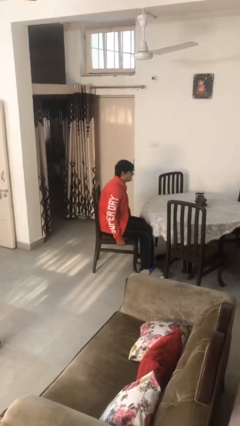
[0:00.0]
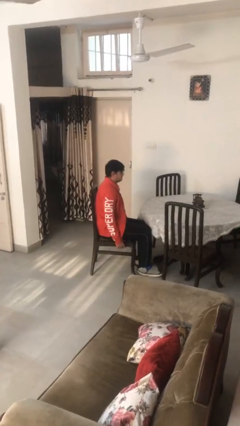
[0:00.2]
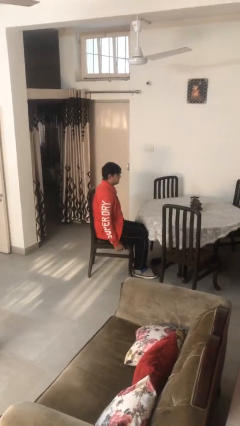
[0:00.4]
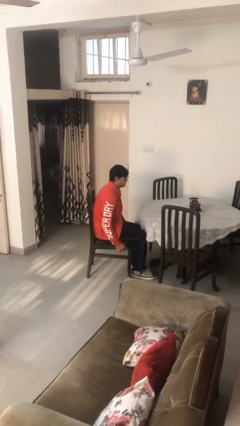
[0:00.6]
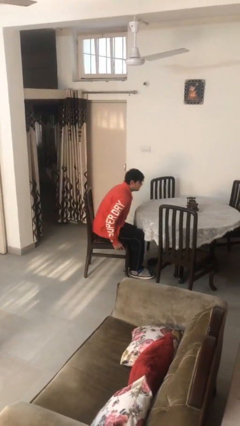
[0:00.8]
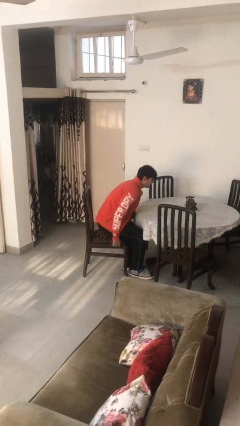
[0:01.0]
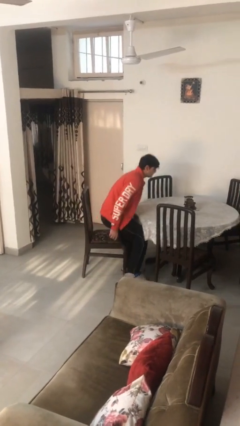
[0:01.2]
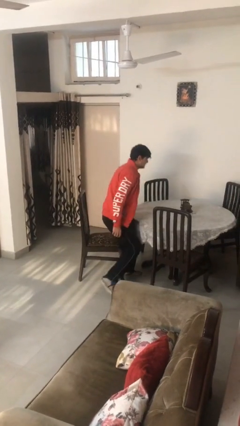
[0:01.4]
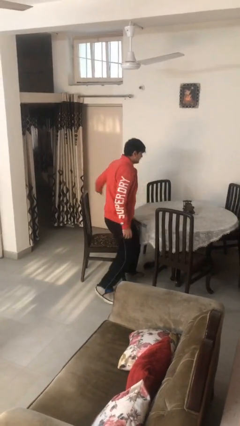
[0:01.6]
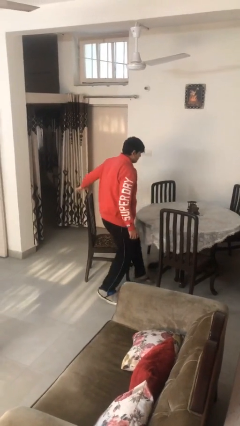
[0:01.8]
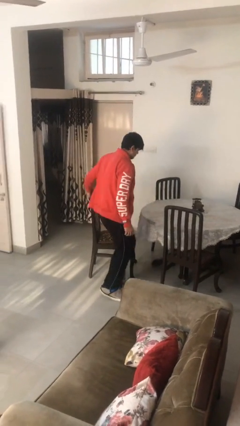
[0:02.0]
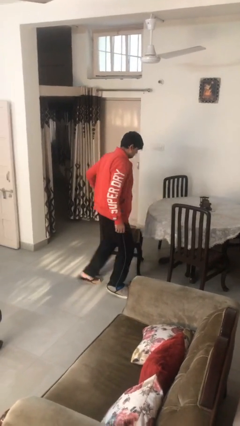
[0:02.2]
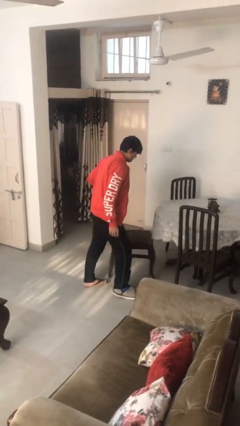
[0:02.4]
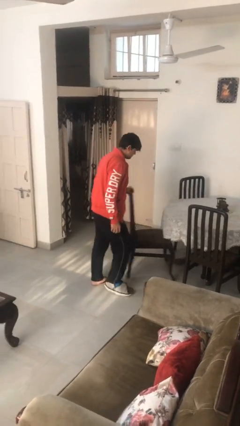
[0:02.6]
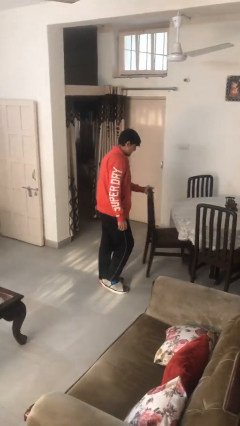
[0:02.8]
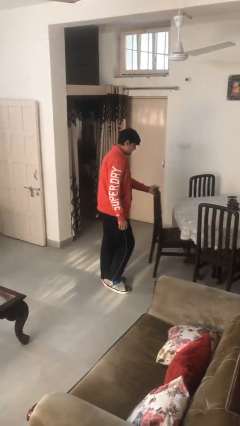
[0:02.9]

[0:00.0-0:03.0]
person stands up

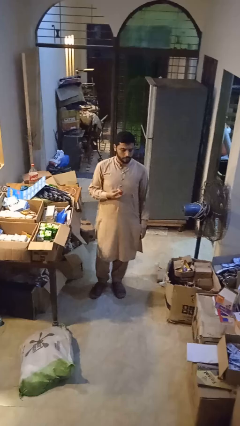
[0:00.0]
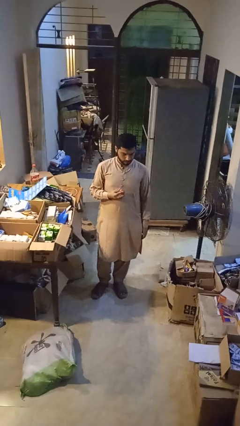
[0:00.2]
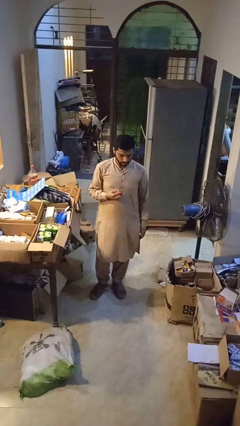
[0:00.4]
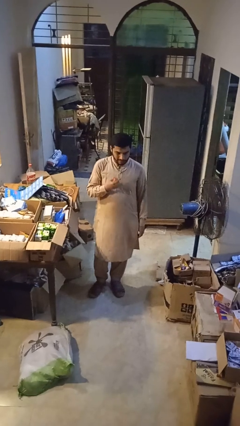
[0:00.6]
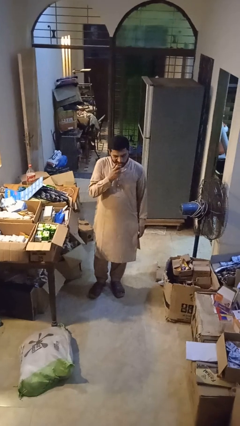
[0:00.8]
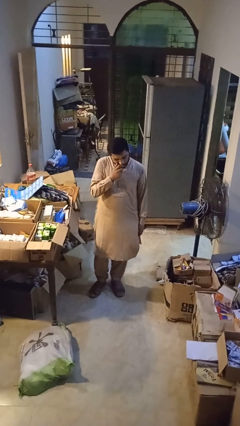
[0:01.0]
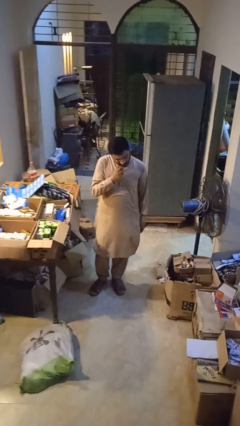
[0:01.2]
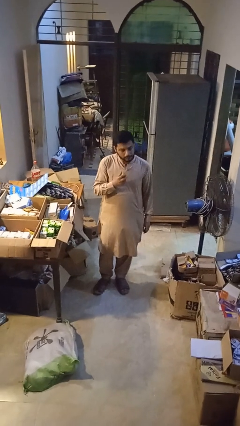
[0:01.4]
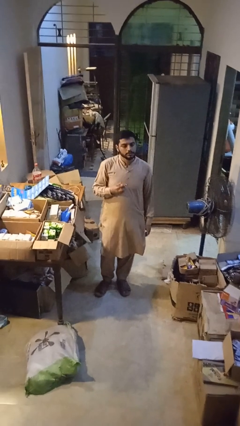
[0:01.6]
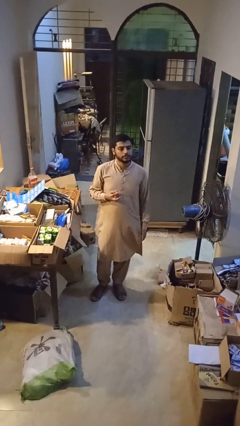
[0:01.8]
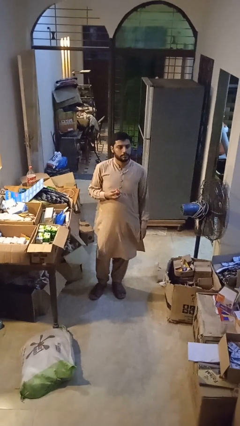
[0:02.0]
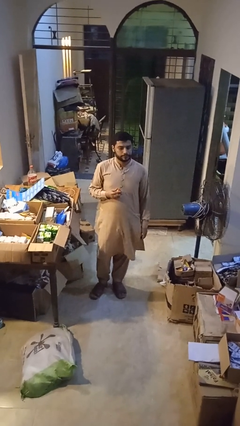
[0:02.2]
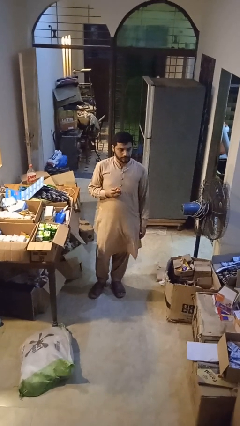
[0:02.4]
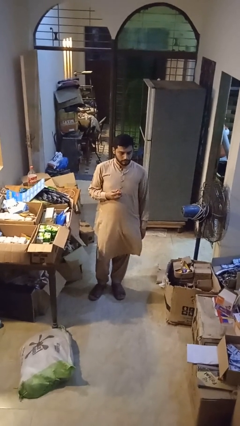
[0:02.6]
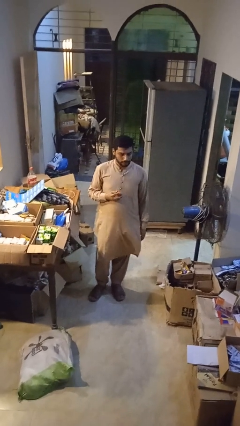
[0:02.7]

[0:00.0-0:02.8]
person eats apple

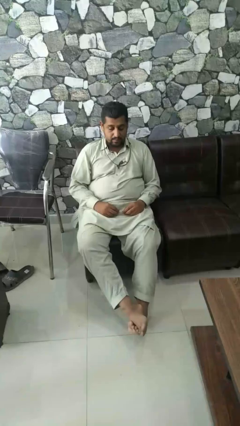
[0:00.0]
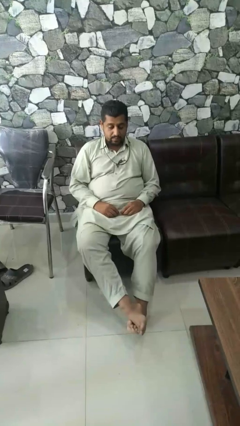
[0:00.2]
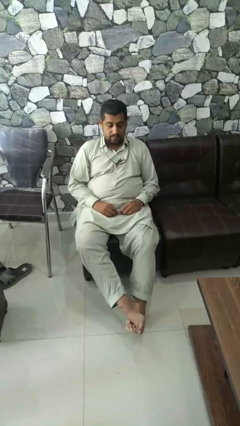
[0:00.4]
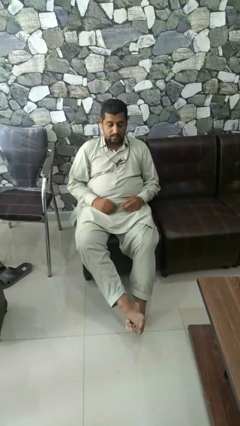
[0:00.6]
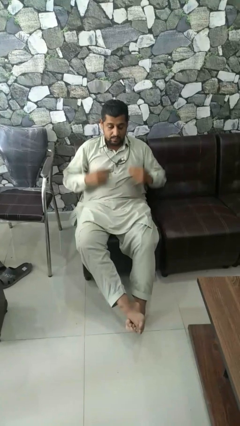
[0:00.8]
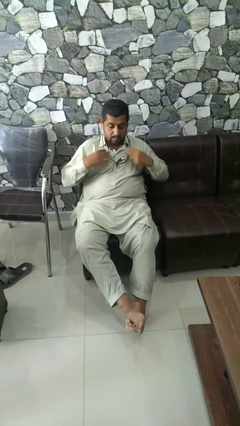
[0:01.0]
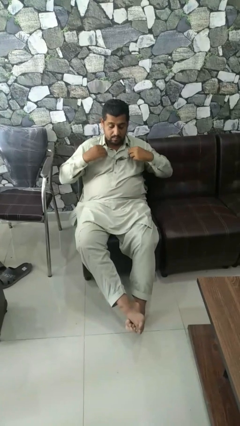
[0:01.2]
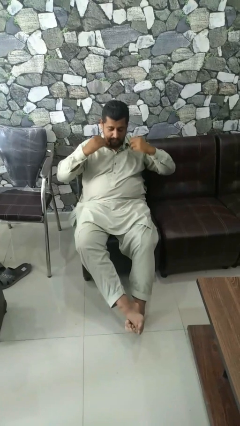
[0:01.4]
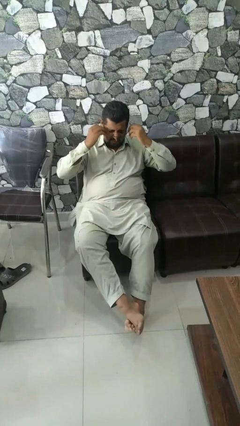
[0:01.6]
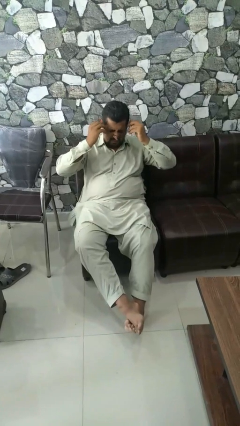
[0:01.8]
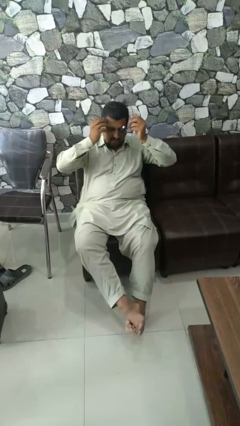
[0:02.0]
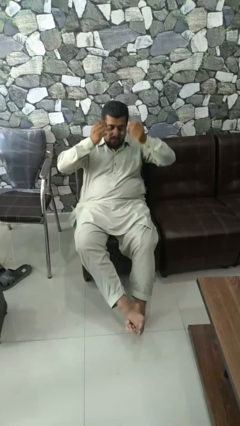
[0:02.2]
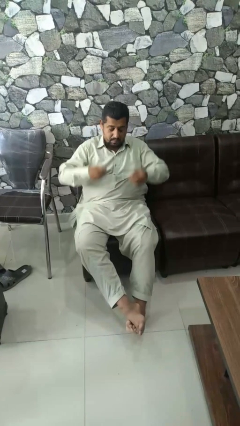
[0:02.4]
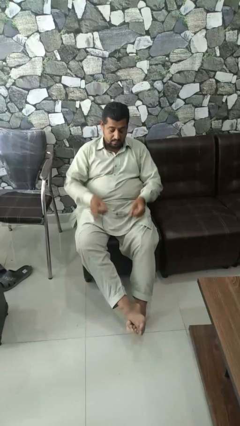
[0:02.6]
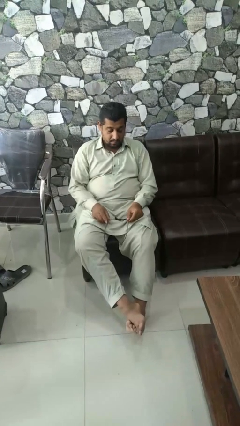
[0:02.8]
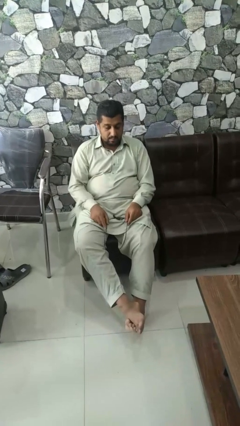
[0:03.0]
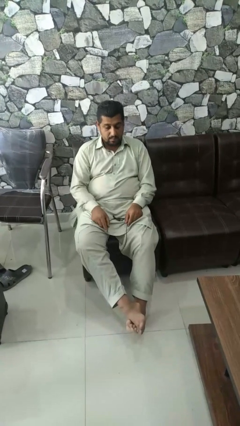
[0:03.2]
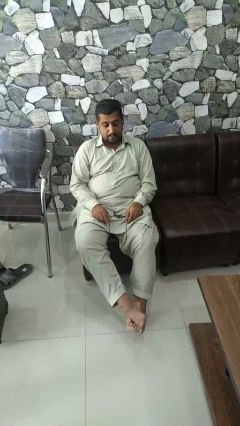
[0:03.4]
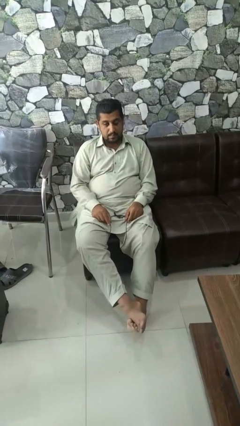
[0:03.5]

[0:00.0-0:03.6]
person takes off necklace

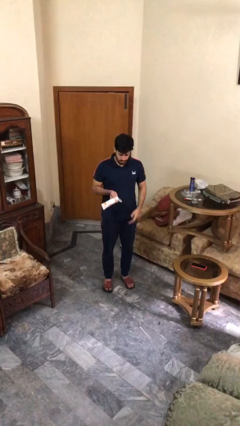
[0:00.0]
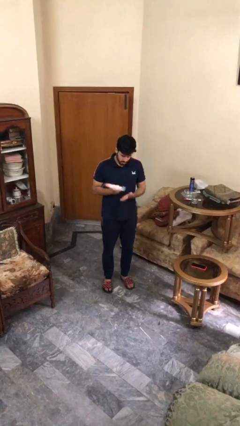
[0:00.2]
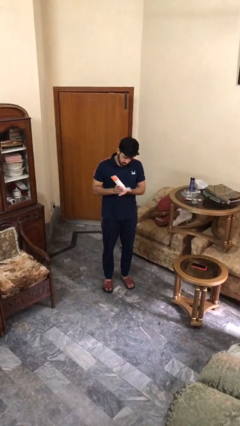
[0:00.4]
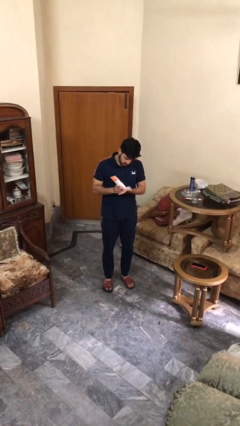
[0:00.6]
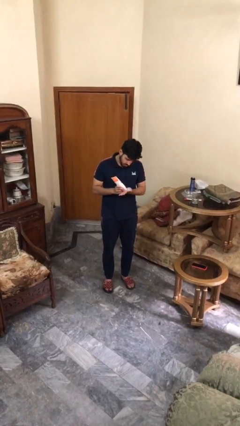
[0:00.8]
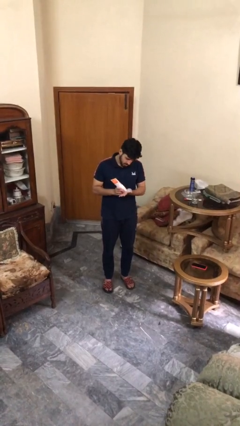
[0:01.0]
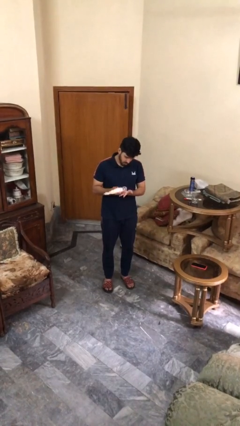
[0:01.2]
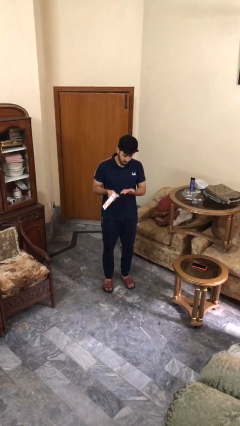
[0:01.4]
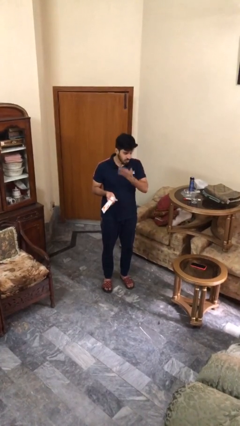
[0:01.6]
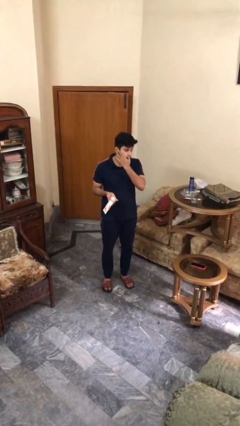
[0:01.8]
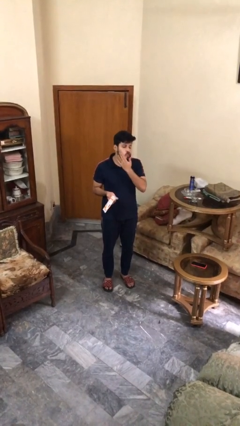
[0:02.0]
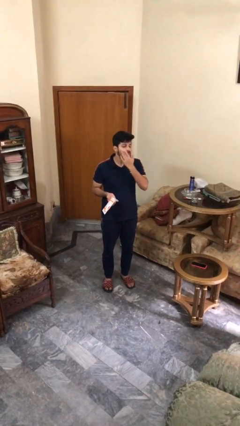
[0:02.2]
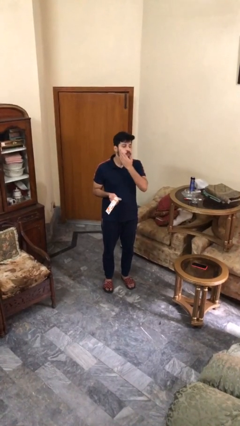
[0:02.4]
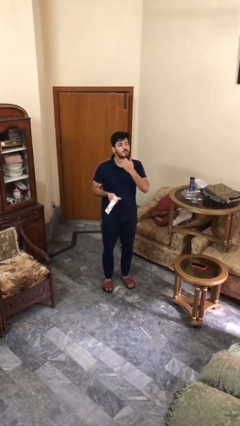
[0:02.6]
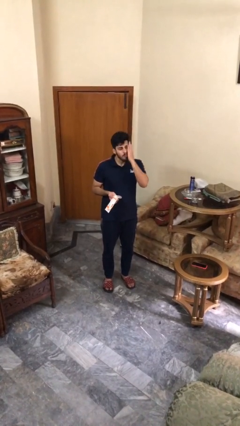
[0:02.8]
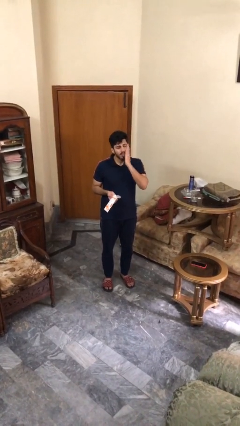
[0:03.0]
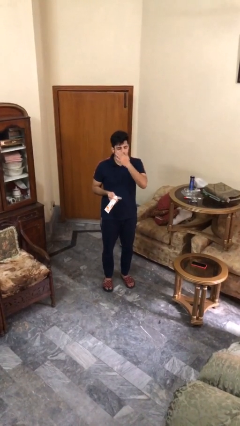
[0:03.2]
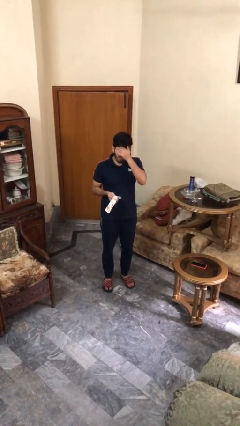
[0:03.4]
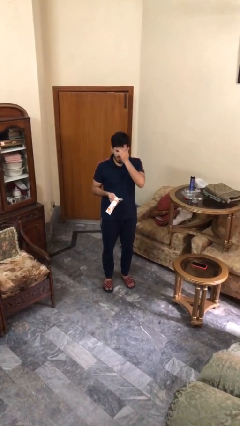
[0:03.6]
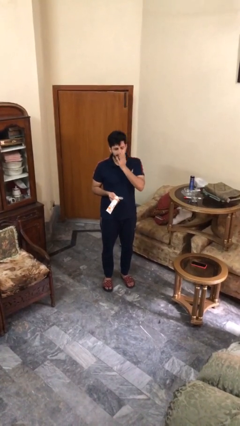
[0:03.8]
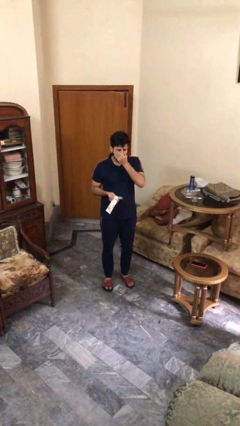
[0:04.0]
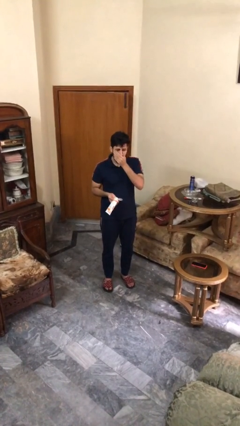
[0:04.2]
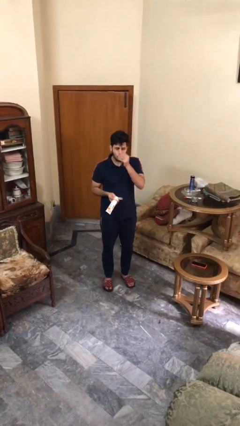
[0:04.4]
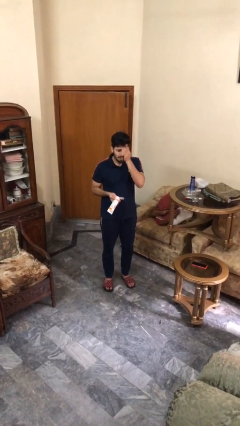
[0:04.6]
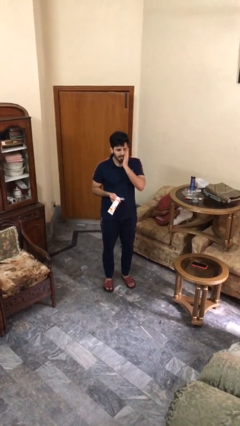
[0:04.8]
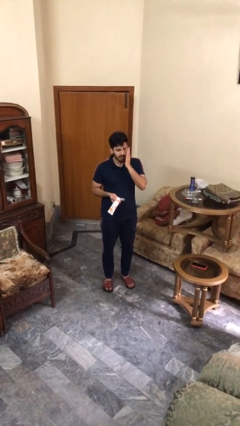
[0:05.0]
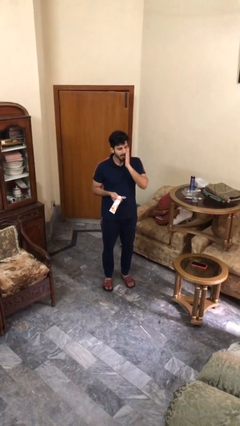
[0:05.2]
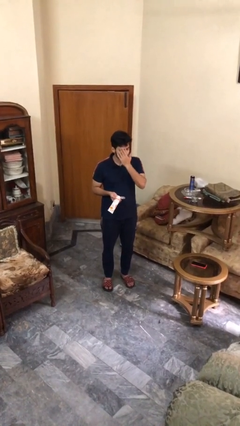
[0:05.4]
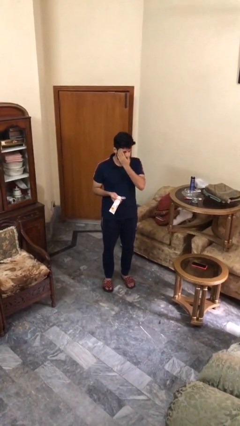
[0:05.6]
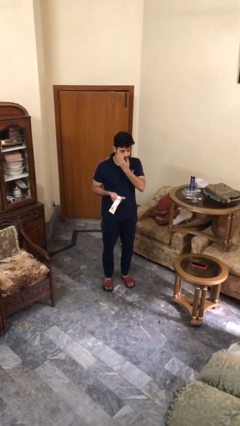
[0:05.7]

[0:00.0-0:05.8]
person applies sunscreen

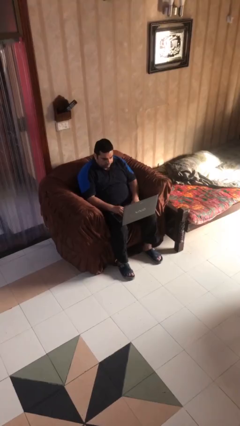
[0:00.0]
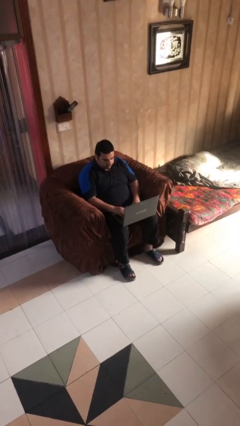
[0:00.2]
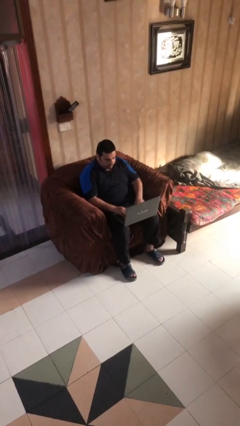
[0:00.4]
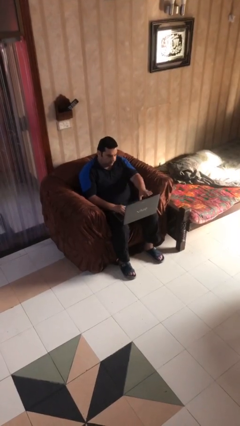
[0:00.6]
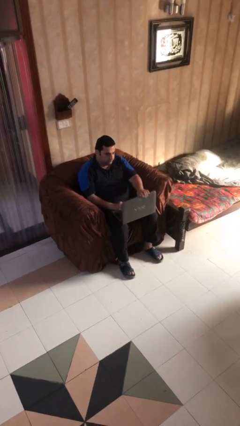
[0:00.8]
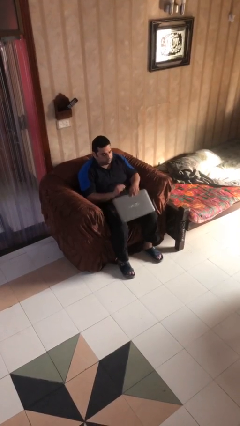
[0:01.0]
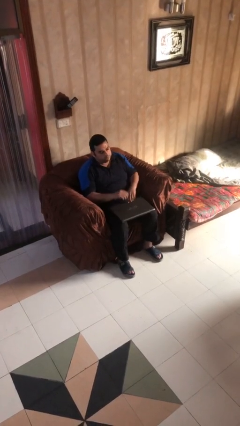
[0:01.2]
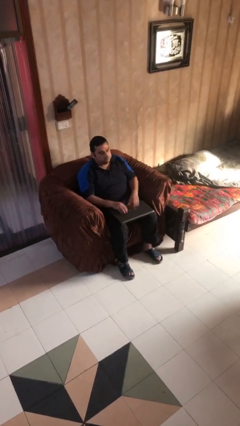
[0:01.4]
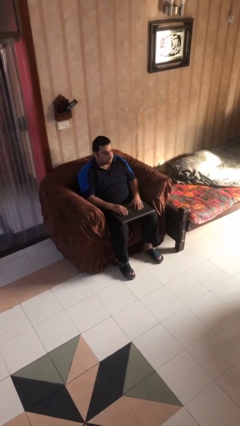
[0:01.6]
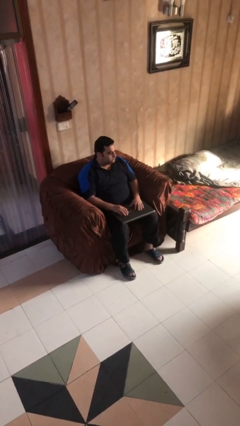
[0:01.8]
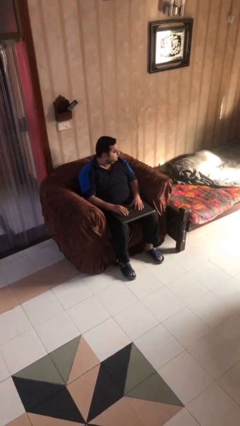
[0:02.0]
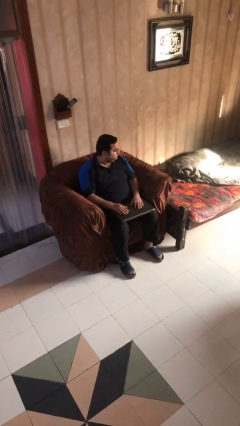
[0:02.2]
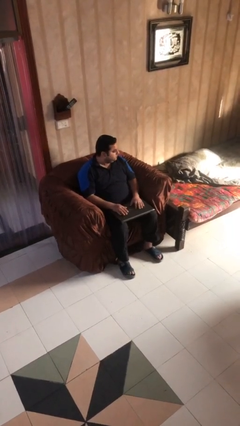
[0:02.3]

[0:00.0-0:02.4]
person closes laptop

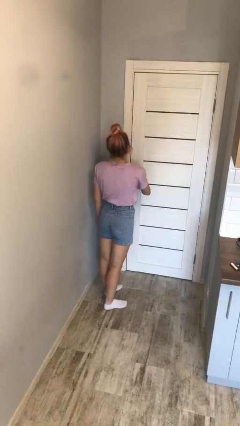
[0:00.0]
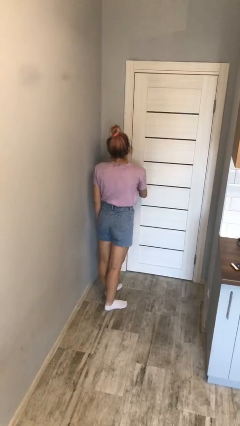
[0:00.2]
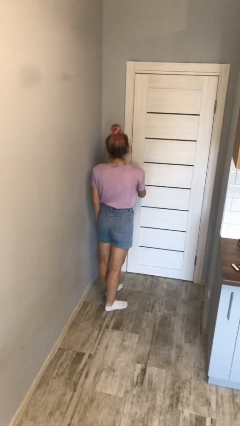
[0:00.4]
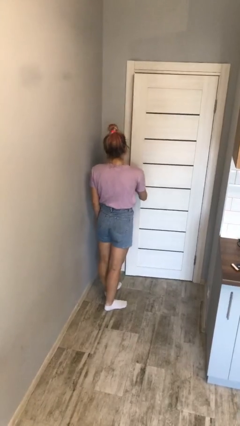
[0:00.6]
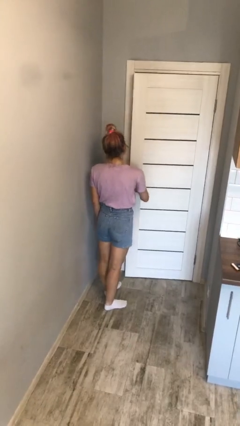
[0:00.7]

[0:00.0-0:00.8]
person opens facility door
